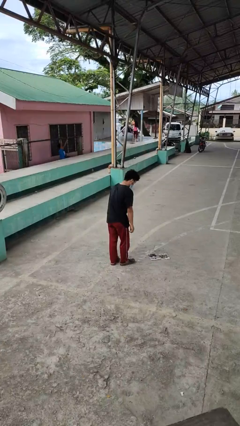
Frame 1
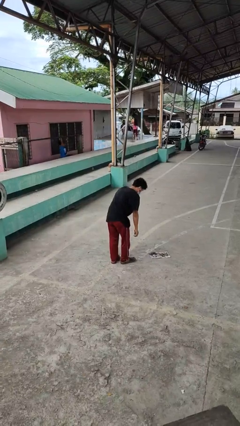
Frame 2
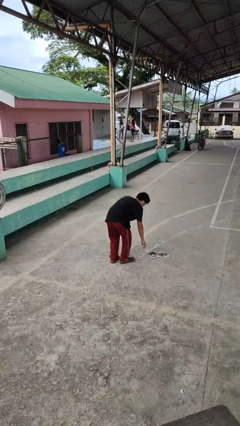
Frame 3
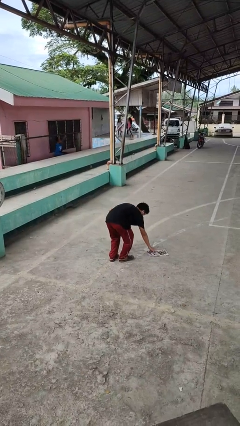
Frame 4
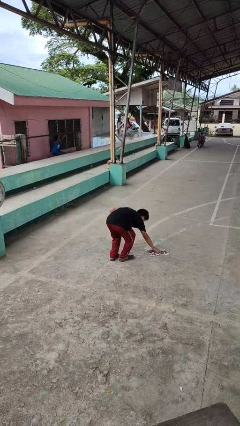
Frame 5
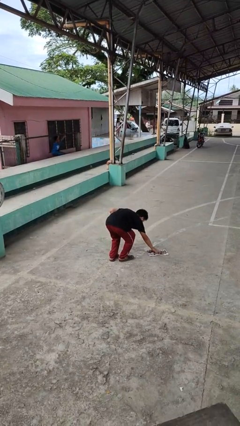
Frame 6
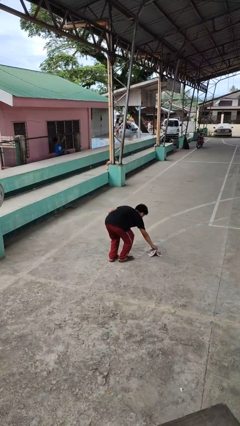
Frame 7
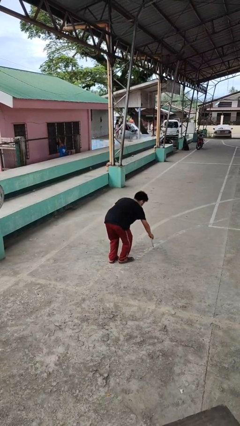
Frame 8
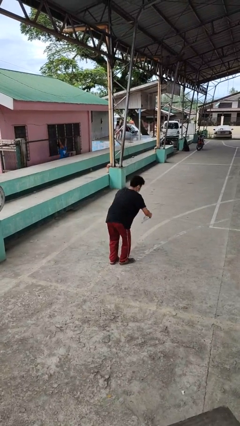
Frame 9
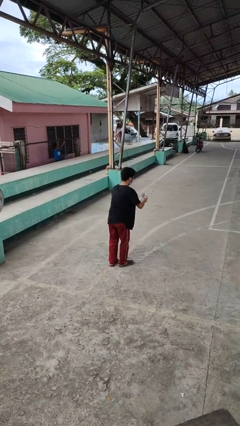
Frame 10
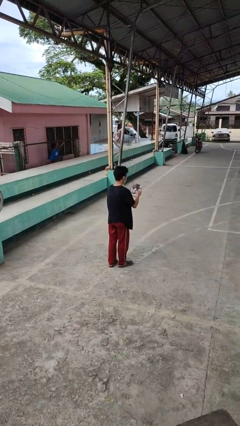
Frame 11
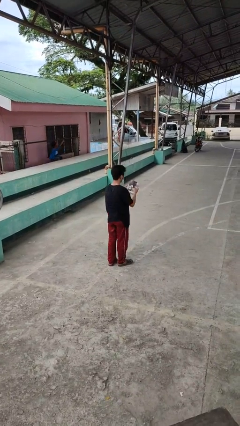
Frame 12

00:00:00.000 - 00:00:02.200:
person picks up object from floor

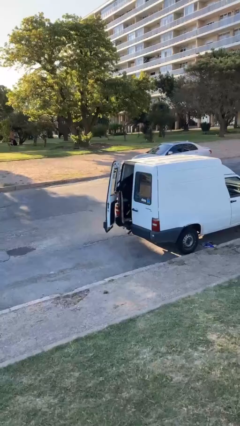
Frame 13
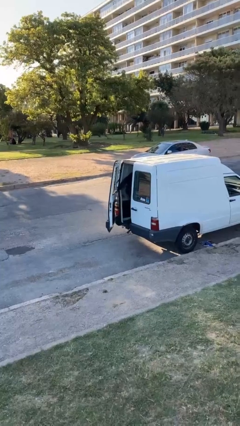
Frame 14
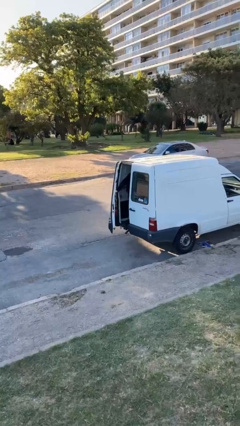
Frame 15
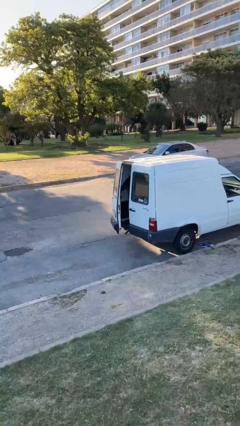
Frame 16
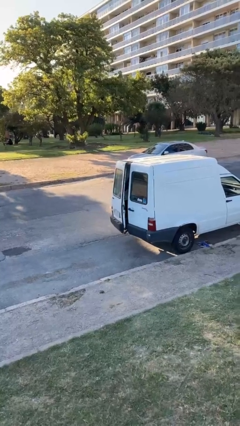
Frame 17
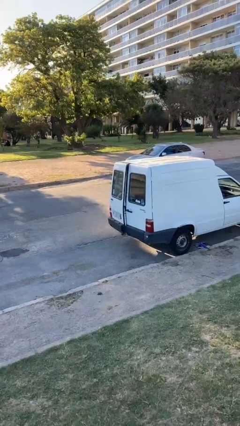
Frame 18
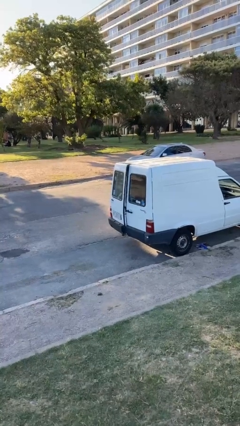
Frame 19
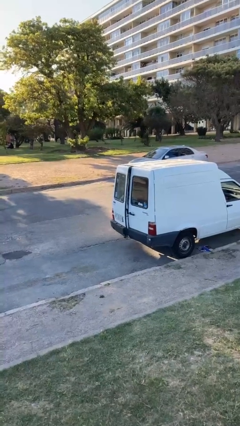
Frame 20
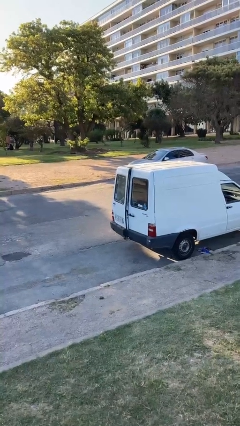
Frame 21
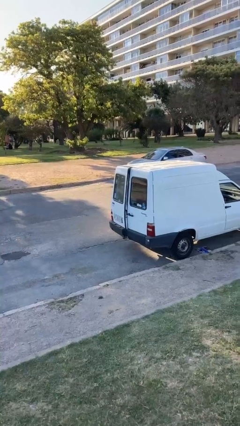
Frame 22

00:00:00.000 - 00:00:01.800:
person closes car door

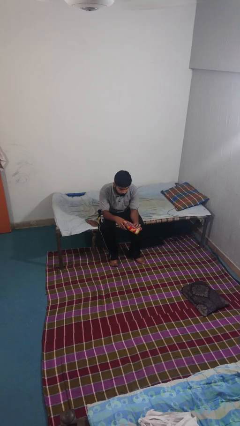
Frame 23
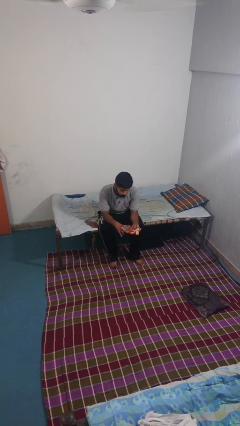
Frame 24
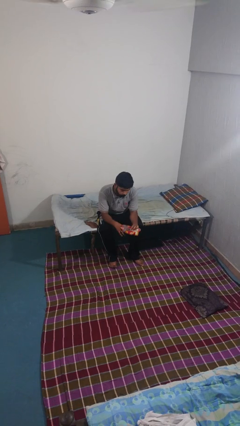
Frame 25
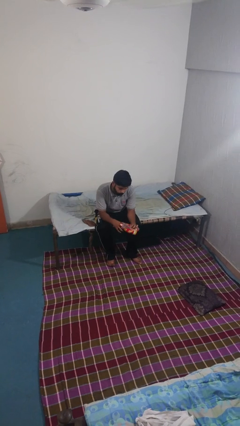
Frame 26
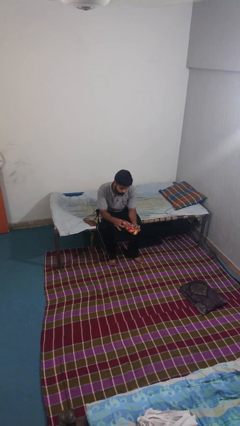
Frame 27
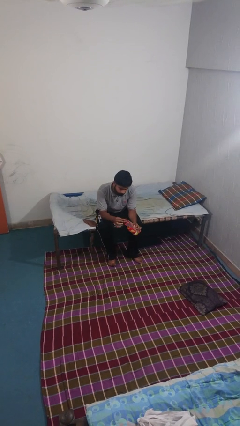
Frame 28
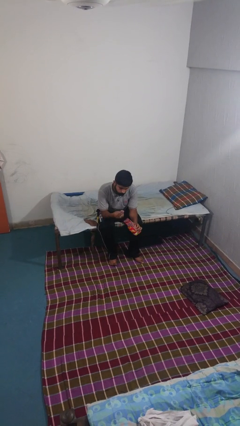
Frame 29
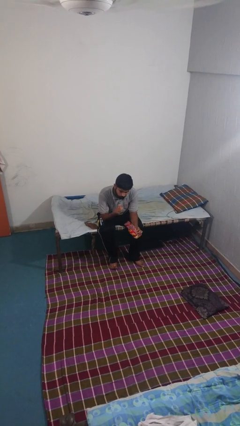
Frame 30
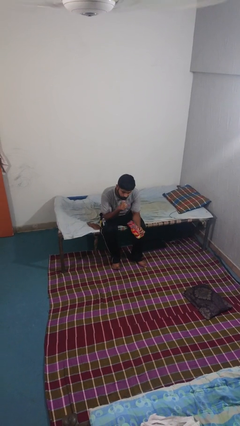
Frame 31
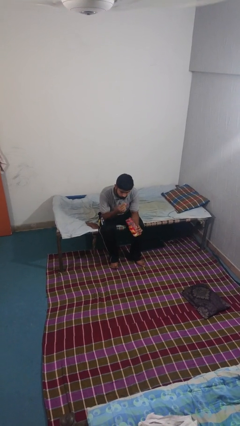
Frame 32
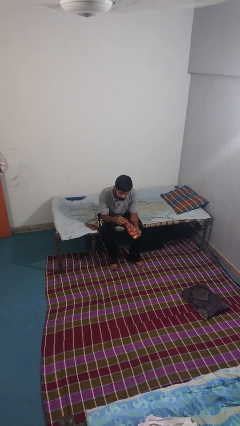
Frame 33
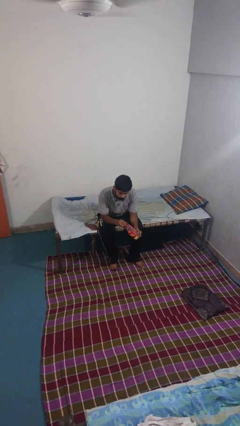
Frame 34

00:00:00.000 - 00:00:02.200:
person eats snack from bag

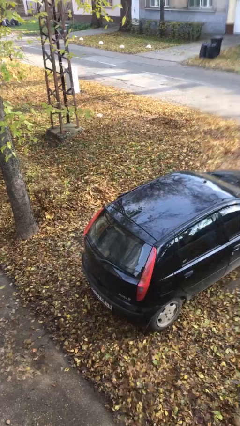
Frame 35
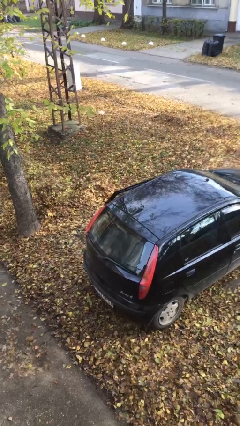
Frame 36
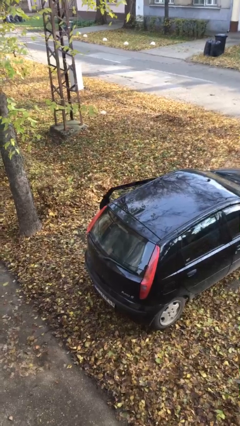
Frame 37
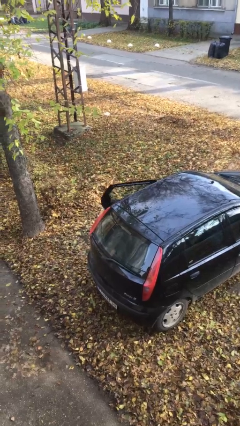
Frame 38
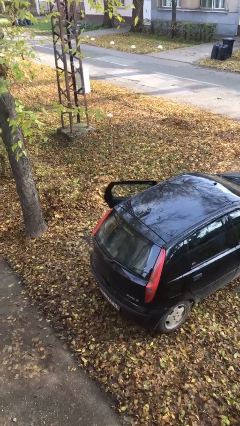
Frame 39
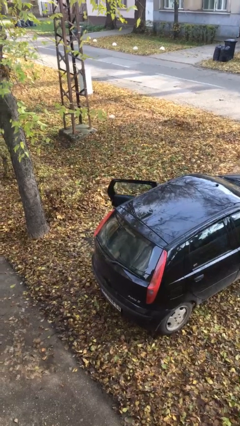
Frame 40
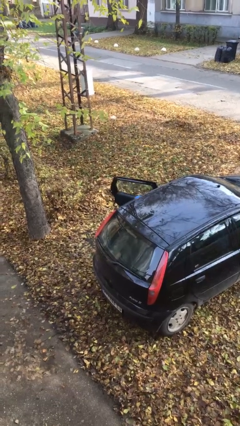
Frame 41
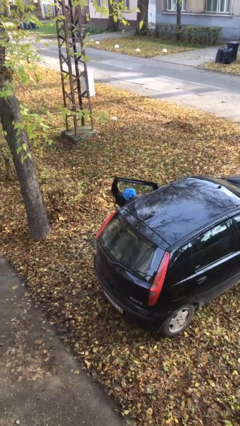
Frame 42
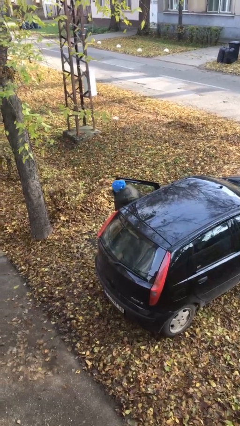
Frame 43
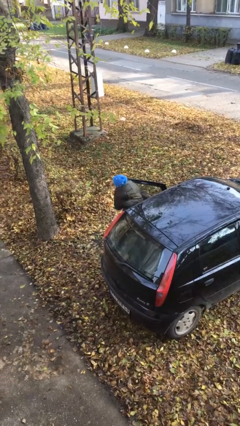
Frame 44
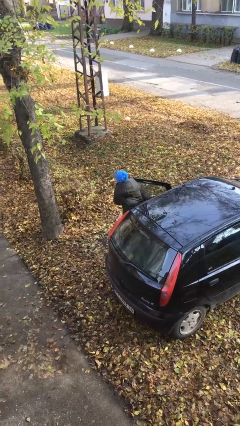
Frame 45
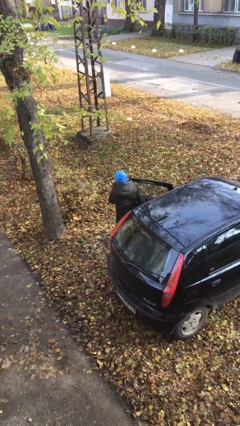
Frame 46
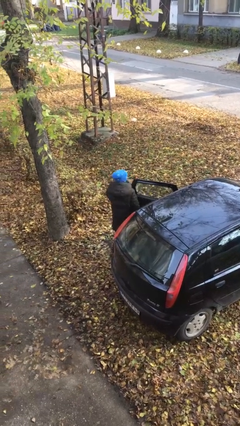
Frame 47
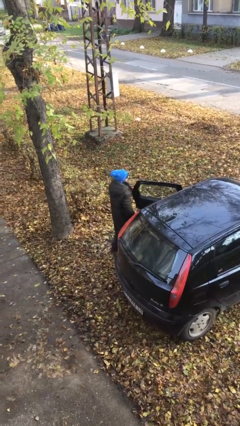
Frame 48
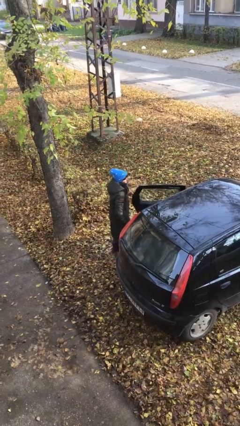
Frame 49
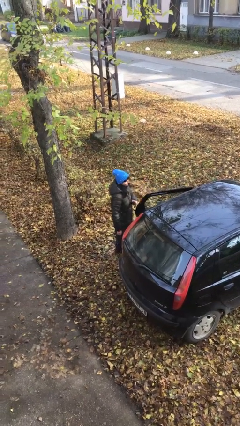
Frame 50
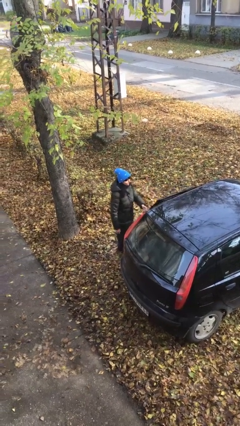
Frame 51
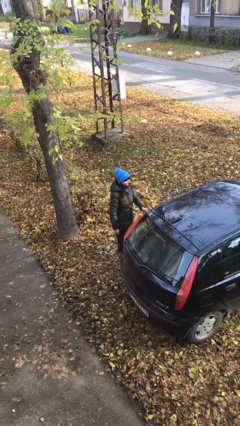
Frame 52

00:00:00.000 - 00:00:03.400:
person exits car

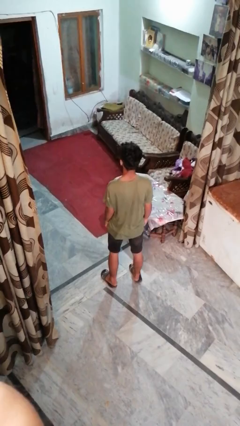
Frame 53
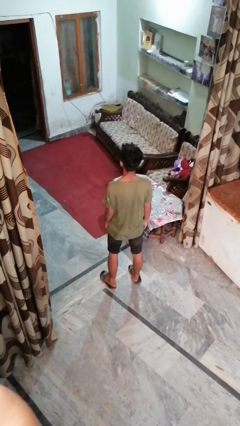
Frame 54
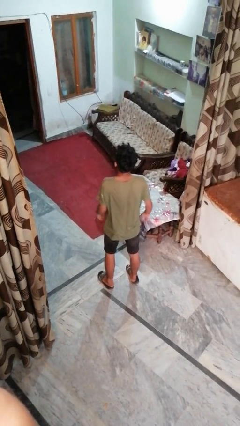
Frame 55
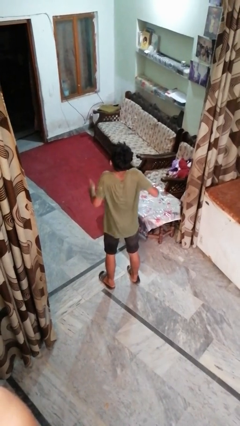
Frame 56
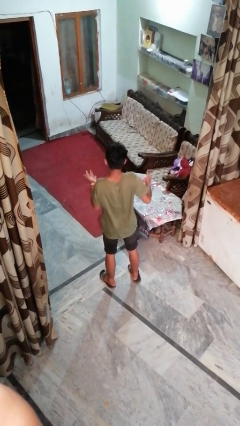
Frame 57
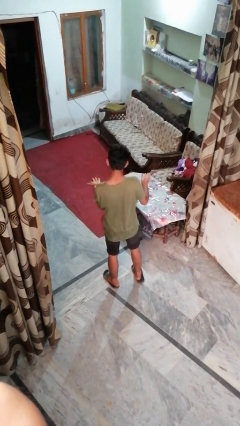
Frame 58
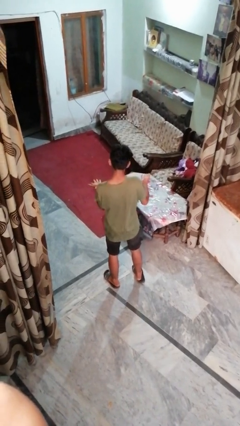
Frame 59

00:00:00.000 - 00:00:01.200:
person shrugs

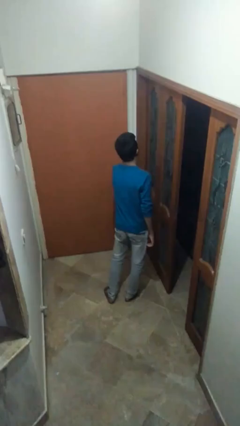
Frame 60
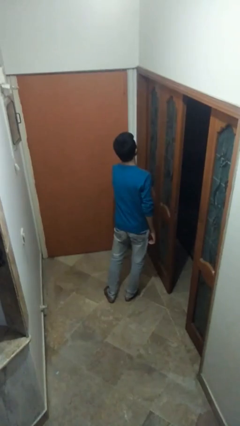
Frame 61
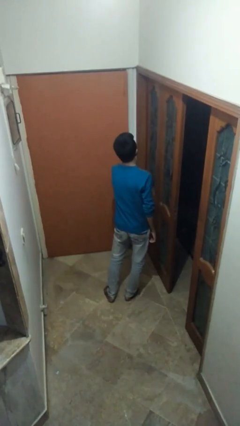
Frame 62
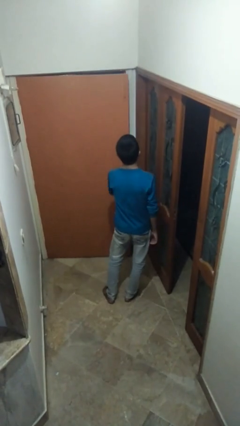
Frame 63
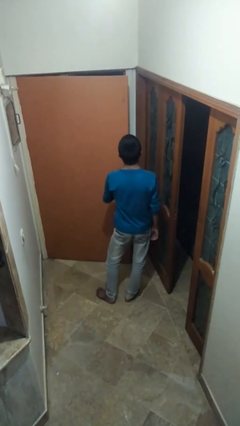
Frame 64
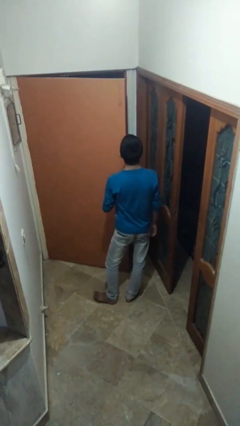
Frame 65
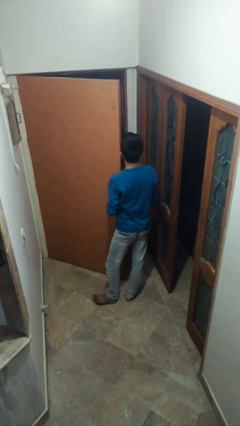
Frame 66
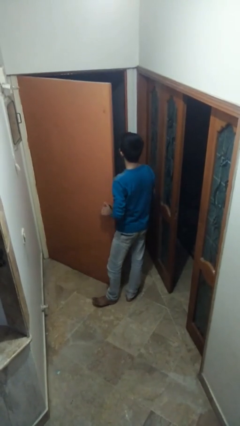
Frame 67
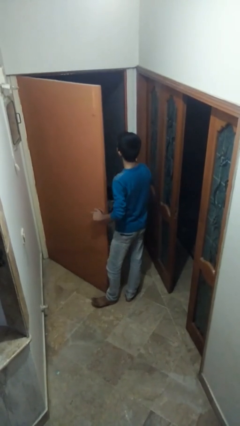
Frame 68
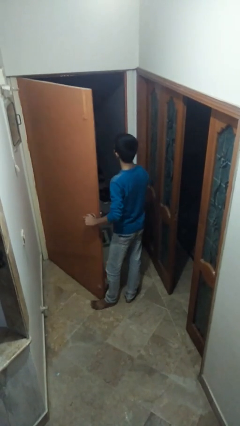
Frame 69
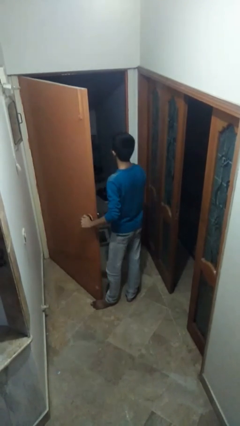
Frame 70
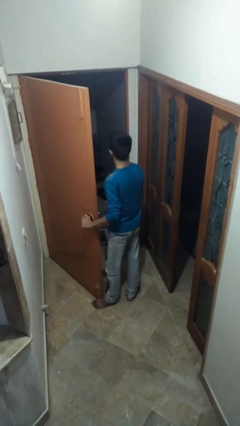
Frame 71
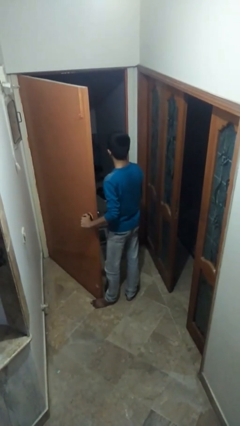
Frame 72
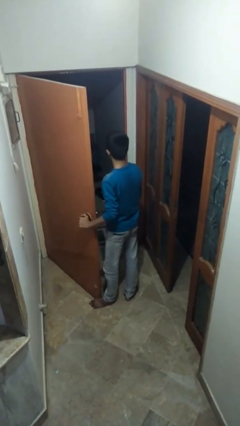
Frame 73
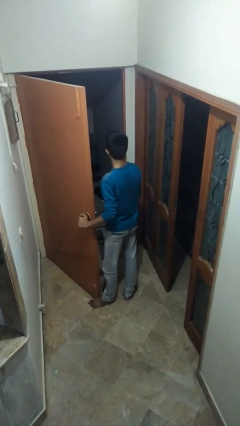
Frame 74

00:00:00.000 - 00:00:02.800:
person opens facility door

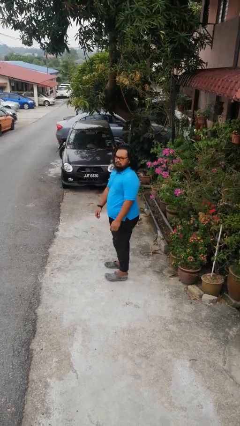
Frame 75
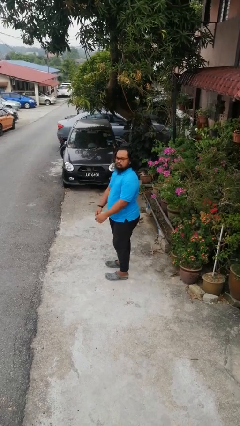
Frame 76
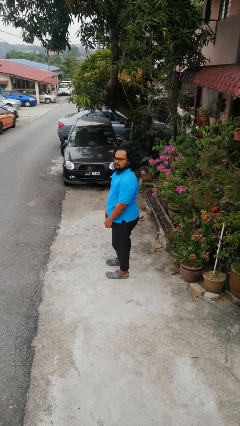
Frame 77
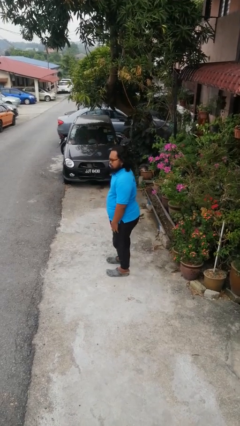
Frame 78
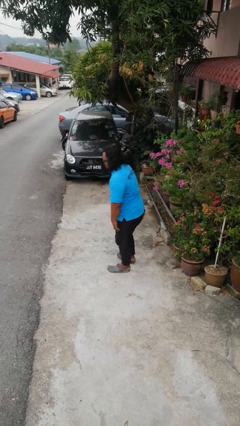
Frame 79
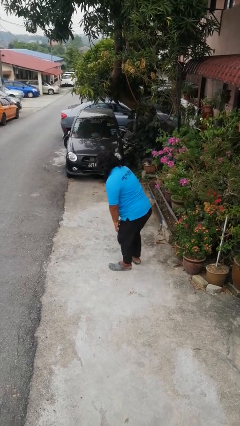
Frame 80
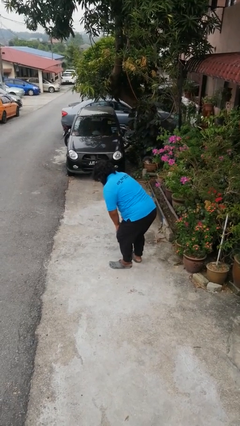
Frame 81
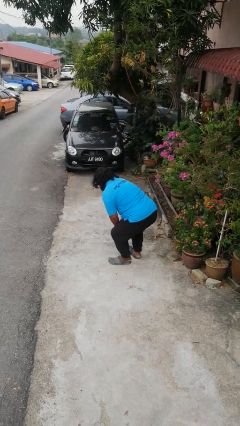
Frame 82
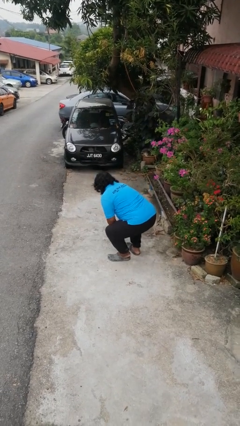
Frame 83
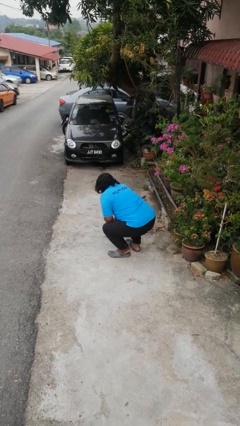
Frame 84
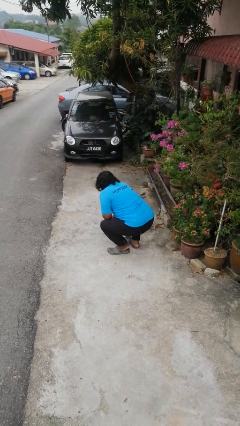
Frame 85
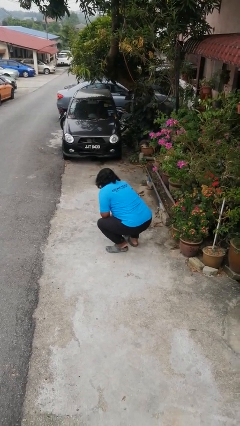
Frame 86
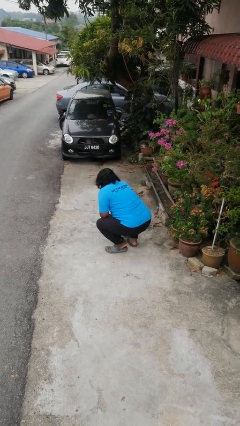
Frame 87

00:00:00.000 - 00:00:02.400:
person squats

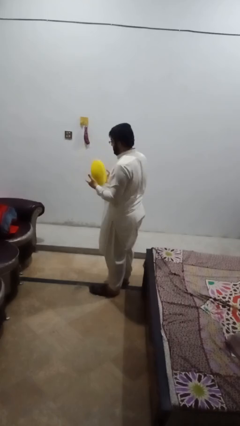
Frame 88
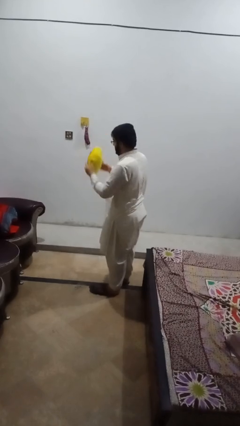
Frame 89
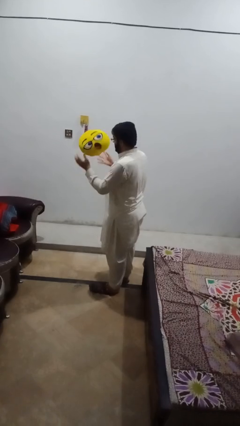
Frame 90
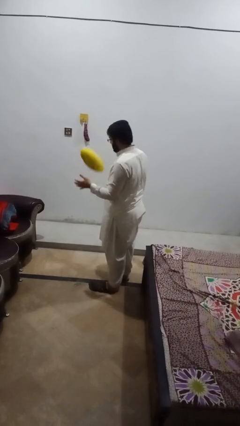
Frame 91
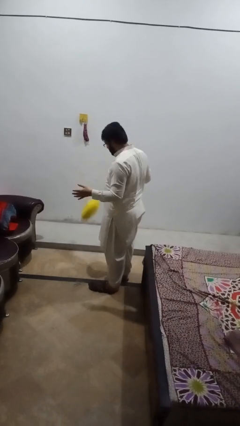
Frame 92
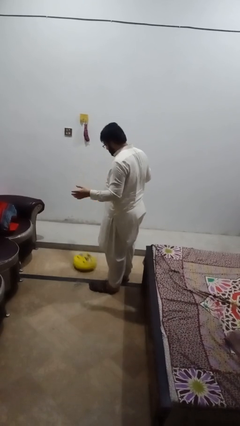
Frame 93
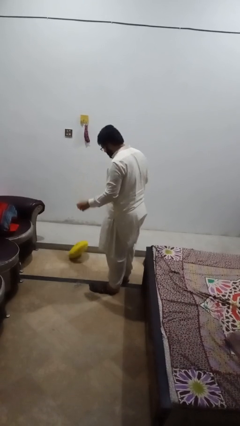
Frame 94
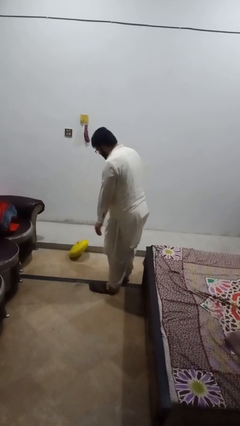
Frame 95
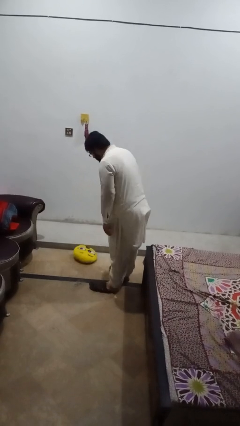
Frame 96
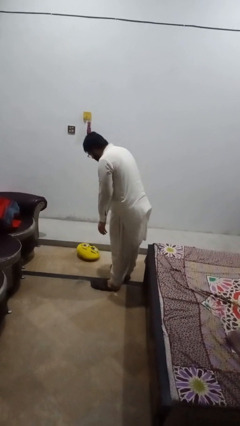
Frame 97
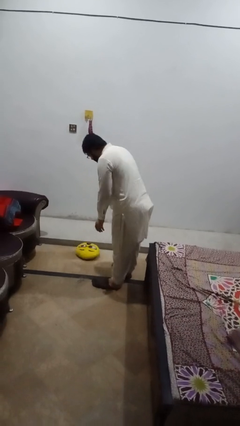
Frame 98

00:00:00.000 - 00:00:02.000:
person drops object
